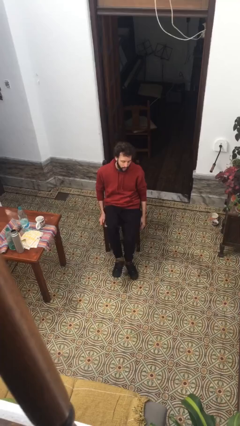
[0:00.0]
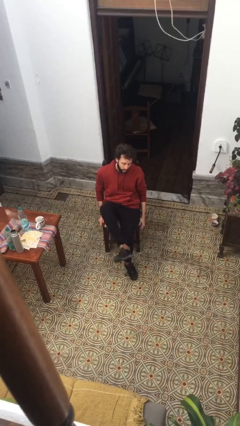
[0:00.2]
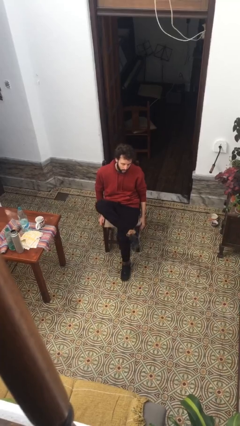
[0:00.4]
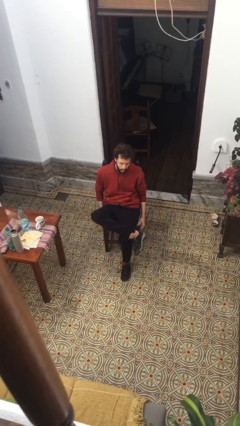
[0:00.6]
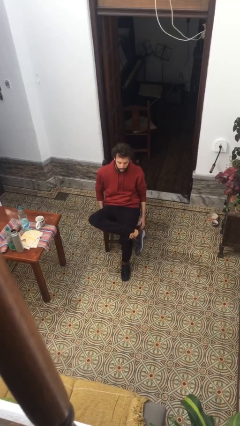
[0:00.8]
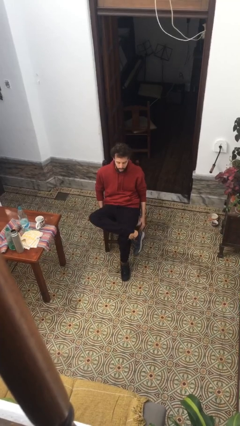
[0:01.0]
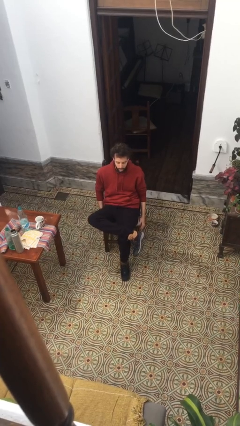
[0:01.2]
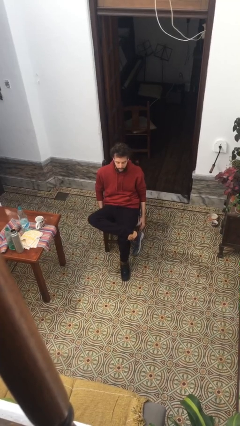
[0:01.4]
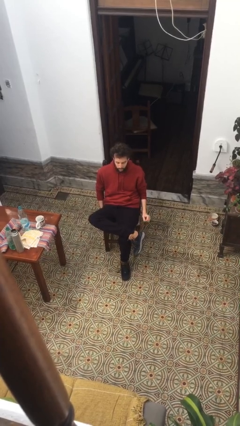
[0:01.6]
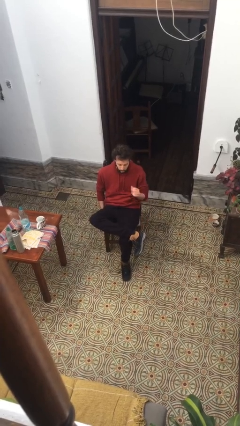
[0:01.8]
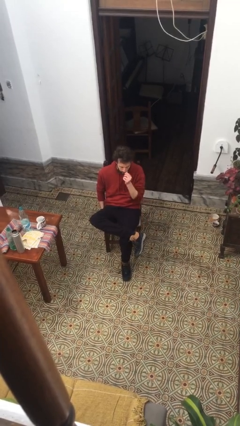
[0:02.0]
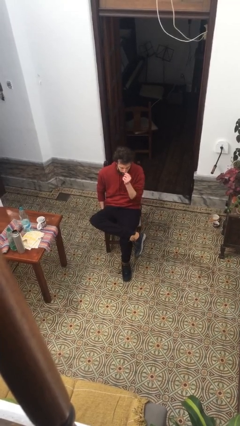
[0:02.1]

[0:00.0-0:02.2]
person crosses legs

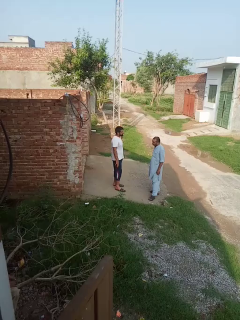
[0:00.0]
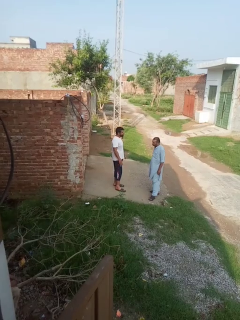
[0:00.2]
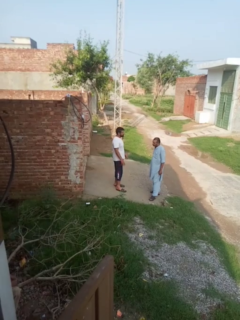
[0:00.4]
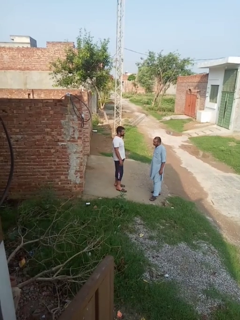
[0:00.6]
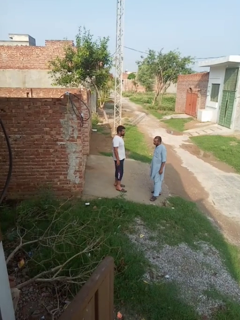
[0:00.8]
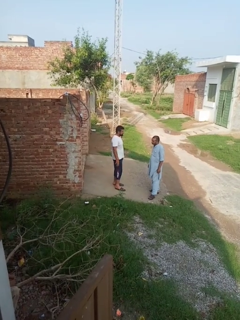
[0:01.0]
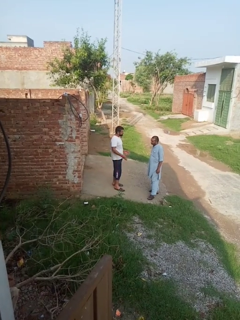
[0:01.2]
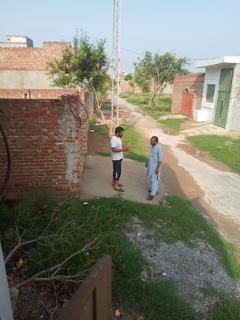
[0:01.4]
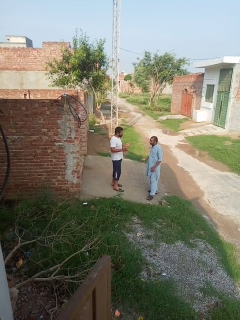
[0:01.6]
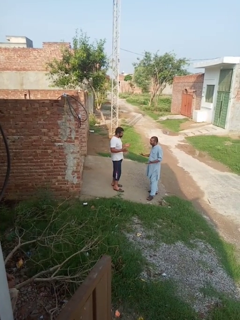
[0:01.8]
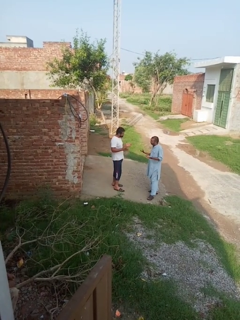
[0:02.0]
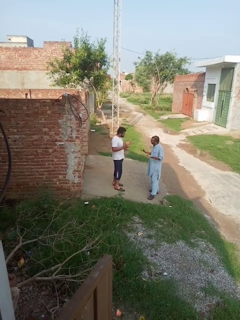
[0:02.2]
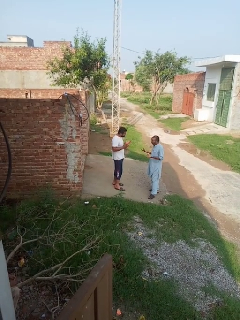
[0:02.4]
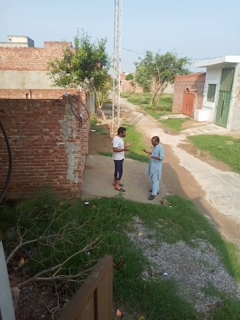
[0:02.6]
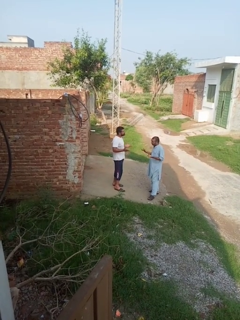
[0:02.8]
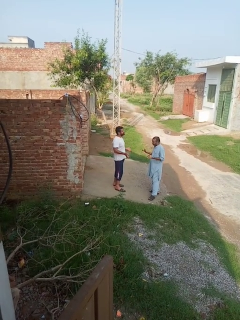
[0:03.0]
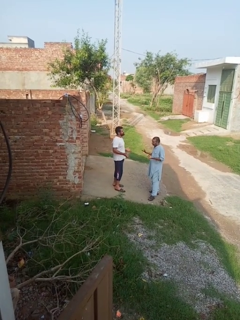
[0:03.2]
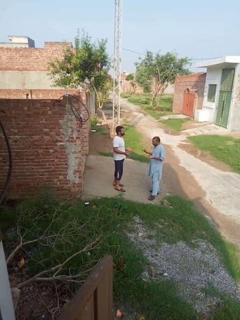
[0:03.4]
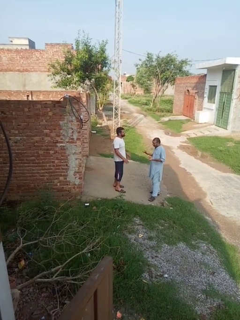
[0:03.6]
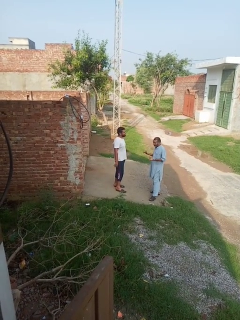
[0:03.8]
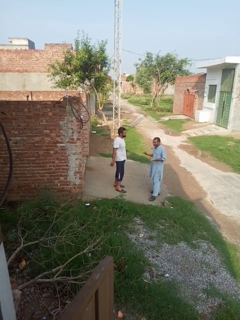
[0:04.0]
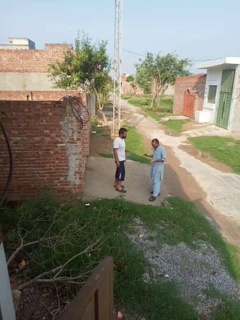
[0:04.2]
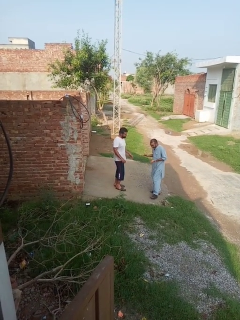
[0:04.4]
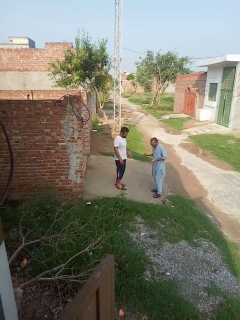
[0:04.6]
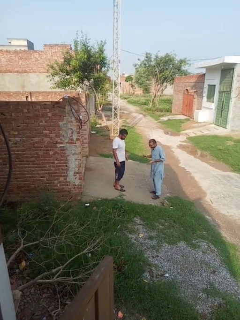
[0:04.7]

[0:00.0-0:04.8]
person laughs with person

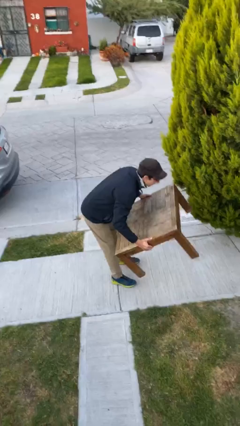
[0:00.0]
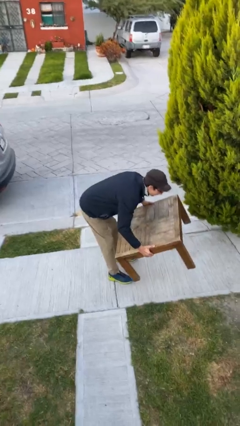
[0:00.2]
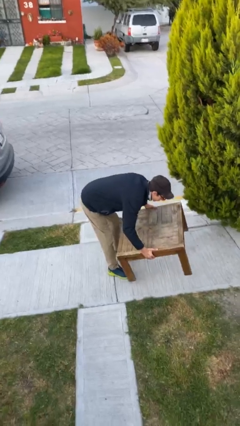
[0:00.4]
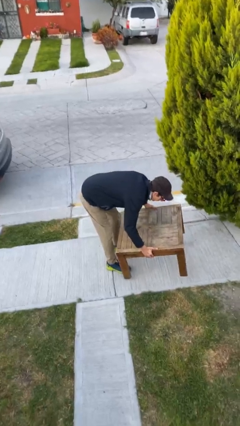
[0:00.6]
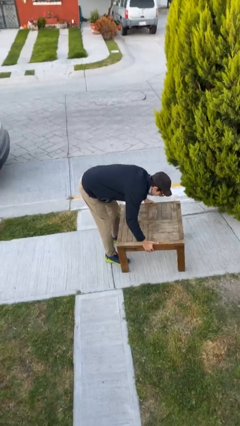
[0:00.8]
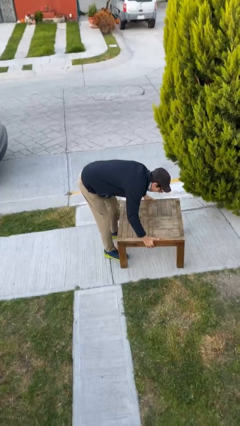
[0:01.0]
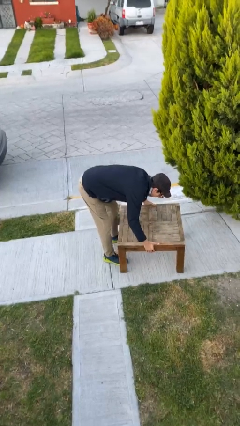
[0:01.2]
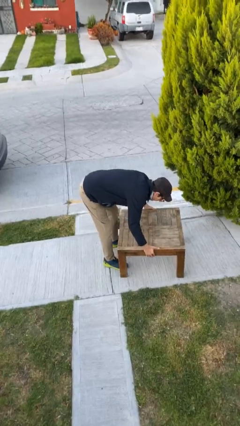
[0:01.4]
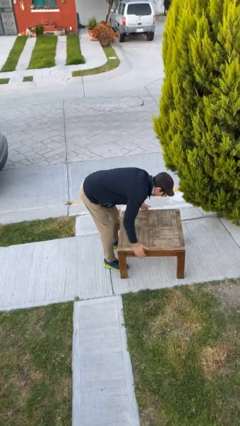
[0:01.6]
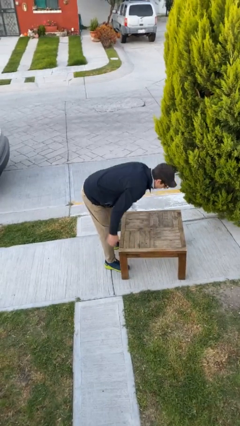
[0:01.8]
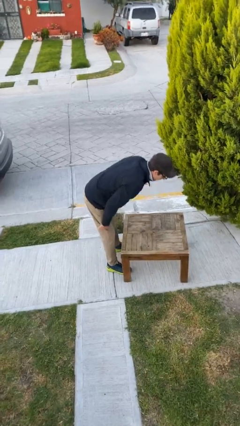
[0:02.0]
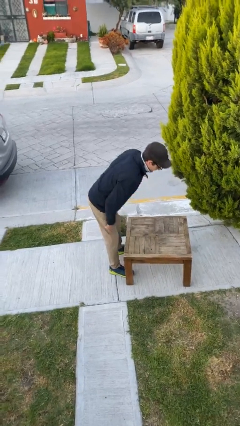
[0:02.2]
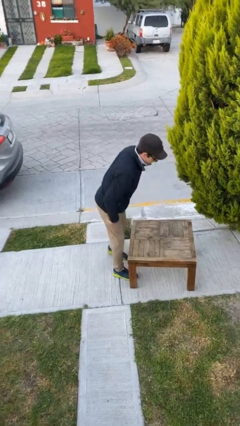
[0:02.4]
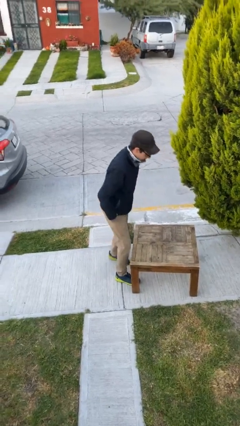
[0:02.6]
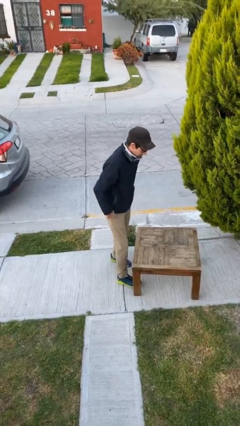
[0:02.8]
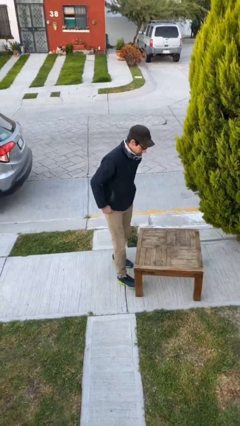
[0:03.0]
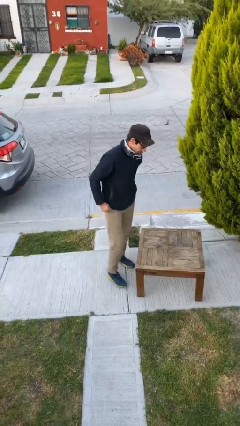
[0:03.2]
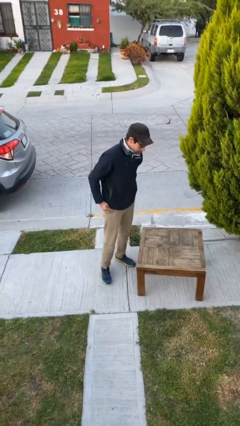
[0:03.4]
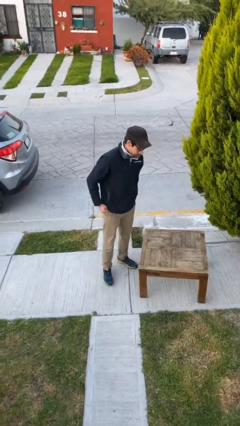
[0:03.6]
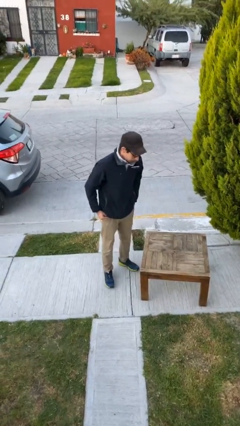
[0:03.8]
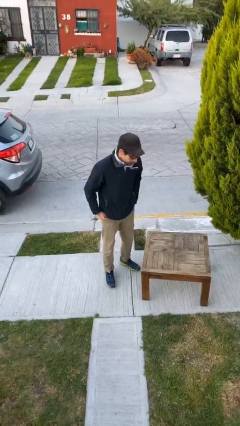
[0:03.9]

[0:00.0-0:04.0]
person puts down object on floor

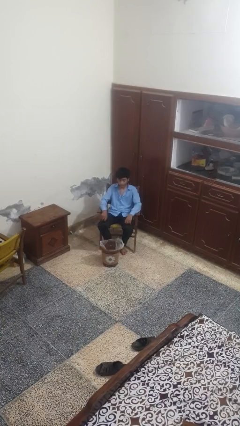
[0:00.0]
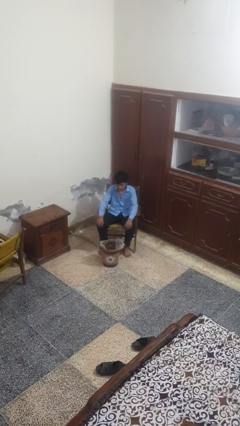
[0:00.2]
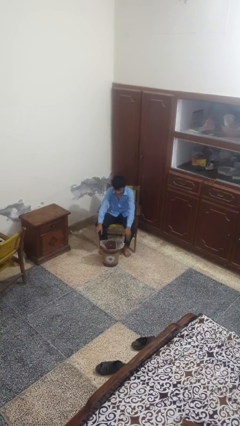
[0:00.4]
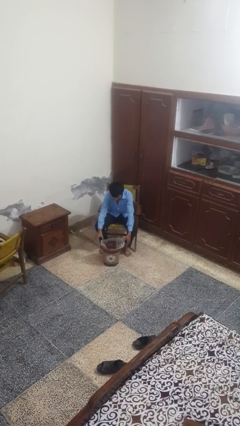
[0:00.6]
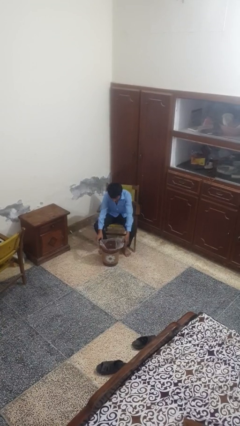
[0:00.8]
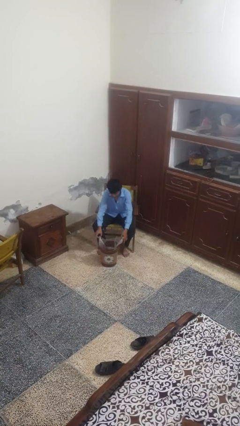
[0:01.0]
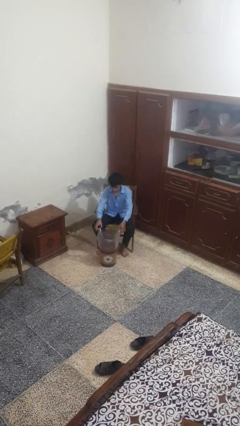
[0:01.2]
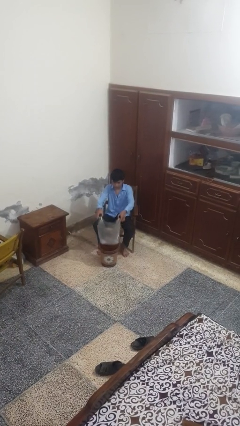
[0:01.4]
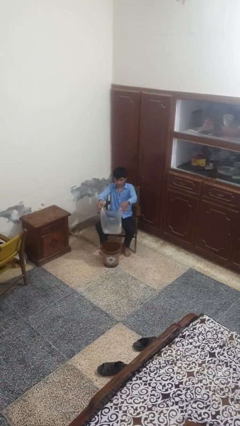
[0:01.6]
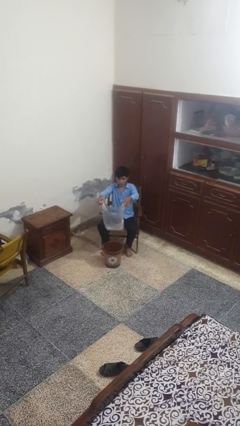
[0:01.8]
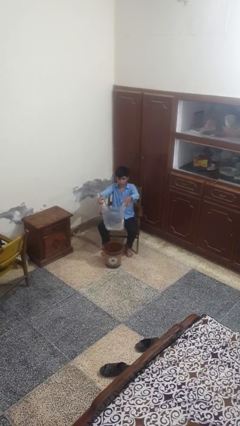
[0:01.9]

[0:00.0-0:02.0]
person removes trashbag from trashcan

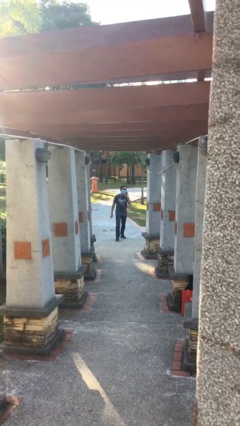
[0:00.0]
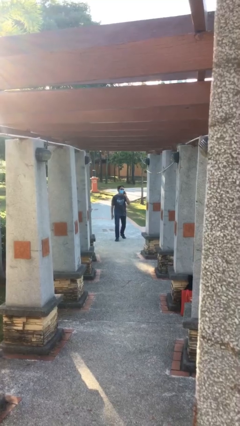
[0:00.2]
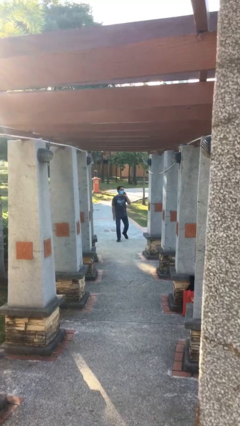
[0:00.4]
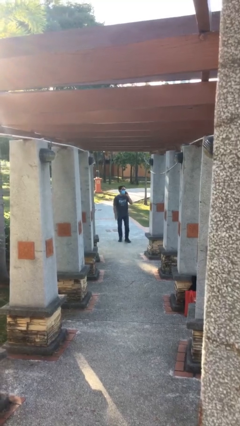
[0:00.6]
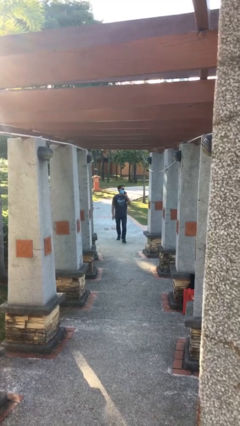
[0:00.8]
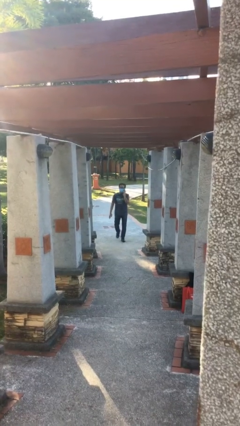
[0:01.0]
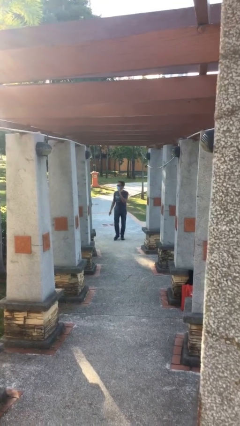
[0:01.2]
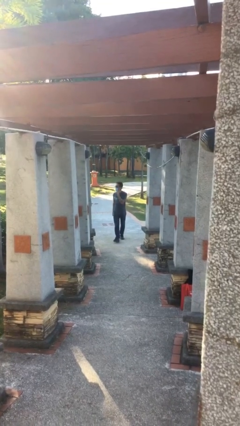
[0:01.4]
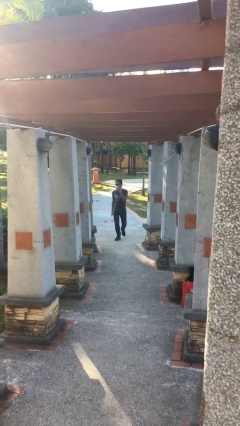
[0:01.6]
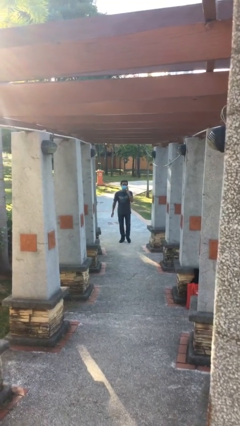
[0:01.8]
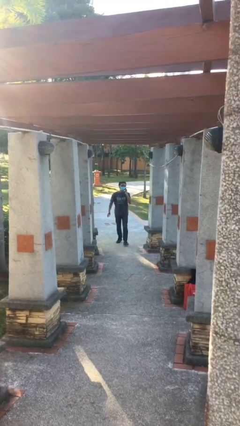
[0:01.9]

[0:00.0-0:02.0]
person enters scene through structure

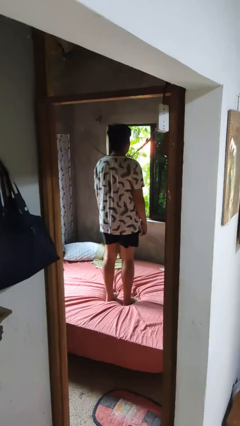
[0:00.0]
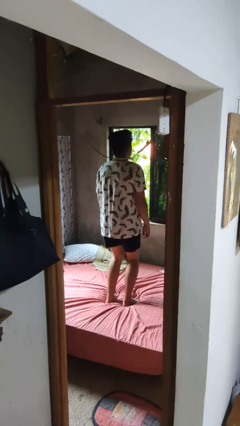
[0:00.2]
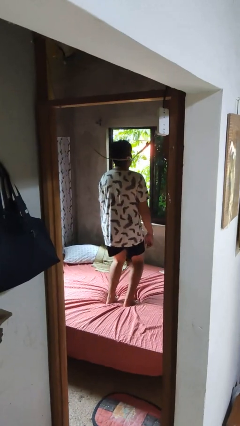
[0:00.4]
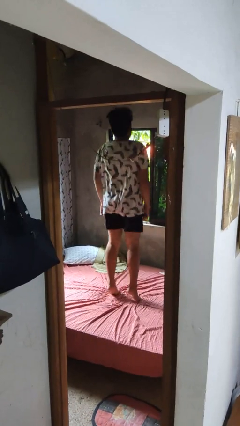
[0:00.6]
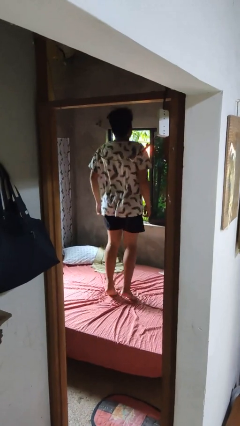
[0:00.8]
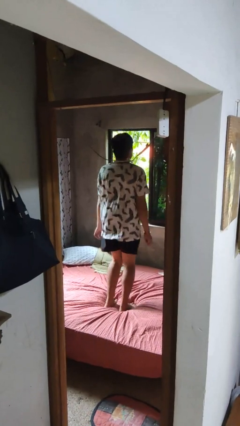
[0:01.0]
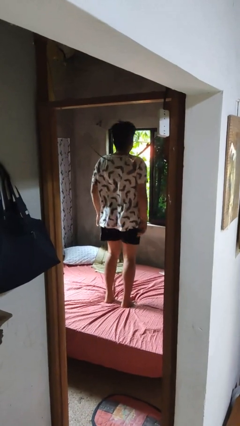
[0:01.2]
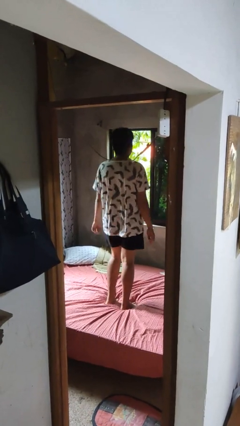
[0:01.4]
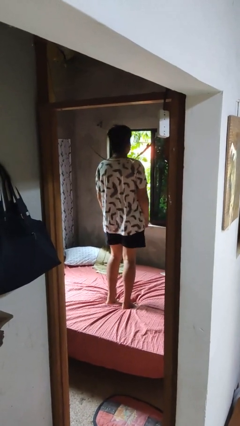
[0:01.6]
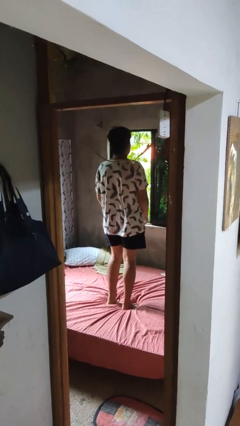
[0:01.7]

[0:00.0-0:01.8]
person jumps on bed

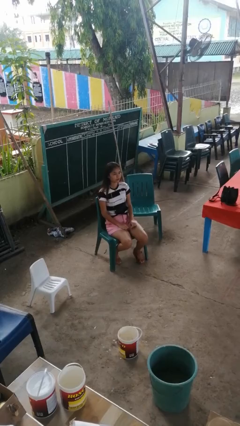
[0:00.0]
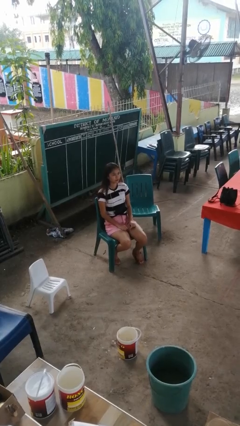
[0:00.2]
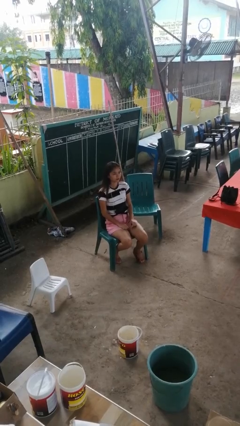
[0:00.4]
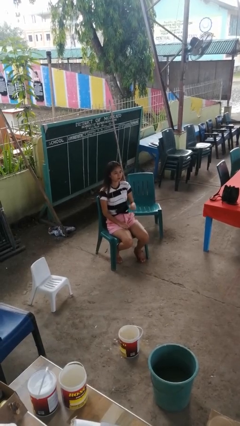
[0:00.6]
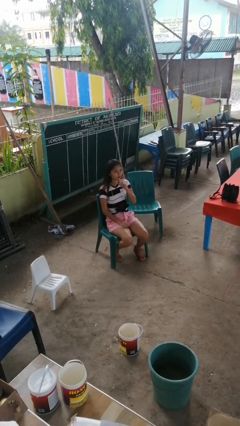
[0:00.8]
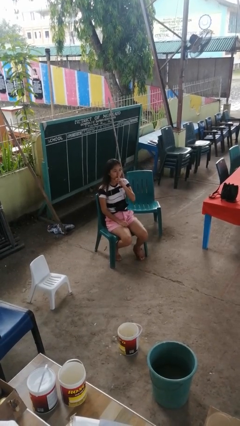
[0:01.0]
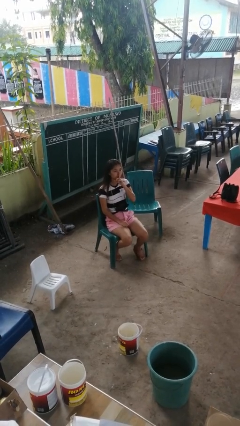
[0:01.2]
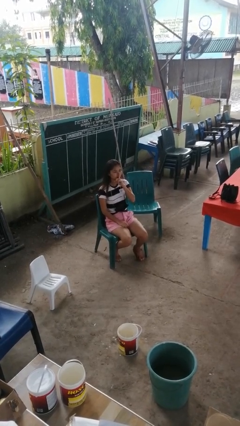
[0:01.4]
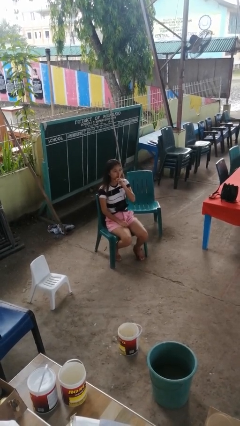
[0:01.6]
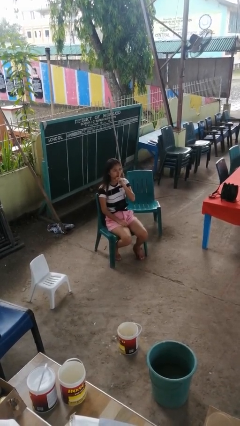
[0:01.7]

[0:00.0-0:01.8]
person gestures be quiet
